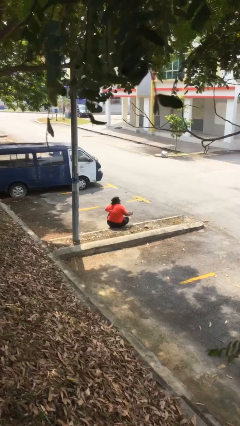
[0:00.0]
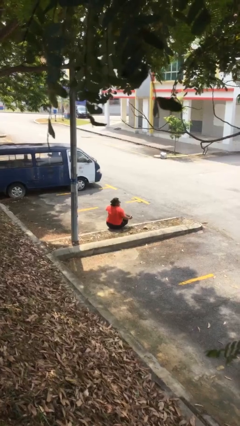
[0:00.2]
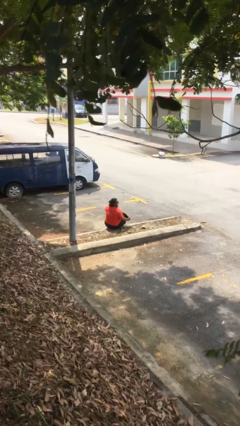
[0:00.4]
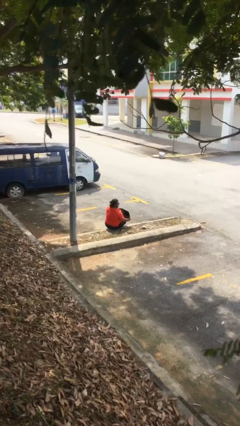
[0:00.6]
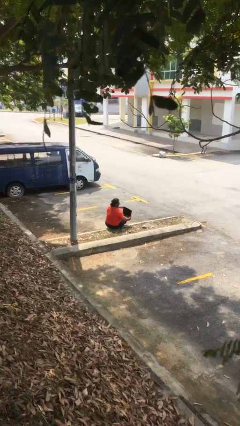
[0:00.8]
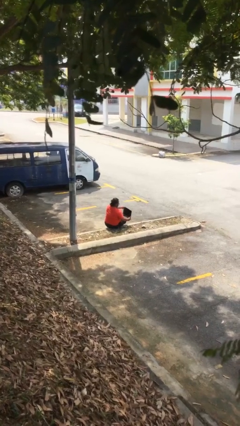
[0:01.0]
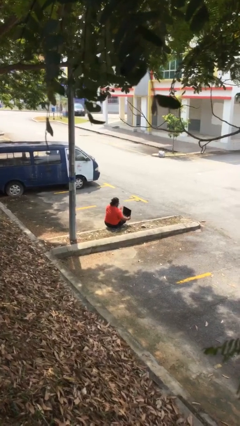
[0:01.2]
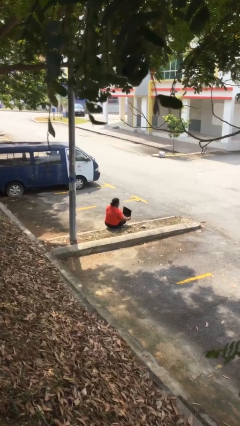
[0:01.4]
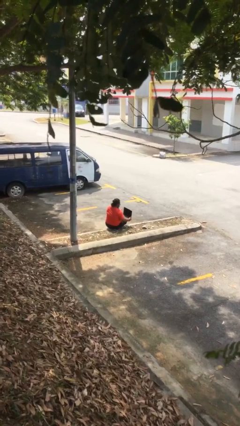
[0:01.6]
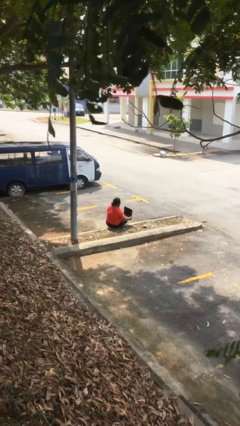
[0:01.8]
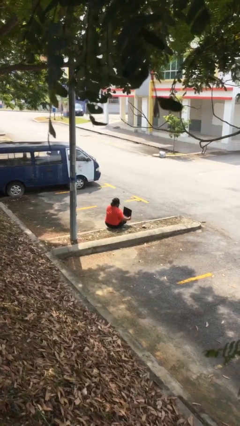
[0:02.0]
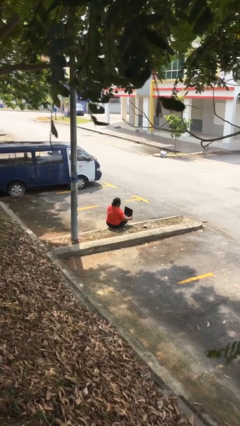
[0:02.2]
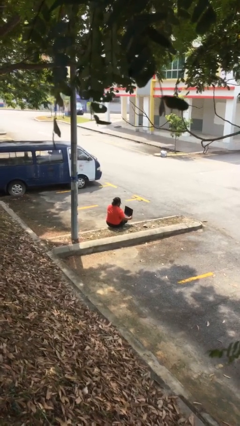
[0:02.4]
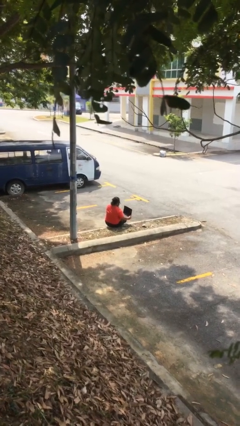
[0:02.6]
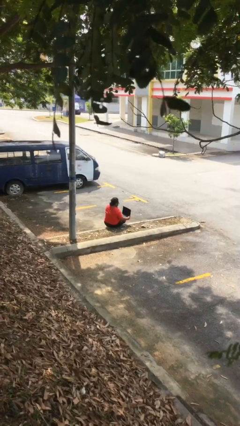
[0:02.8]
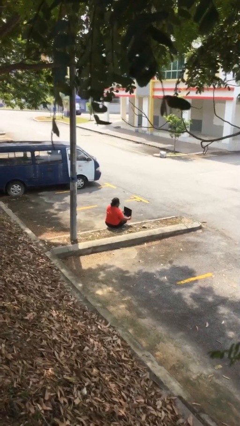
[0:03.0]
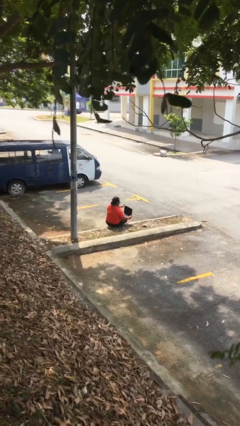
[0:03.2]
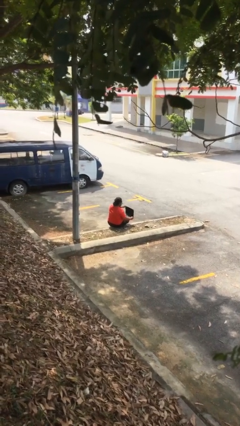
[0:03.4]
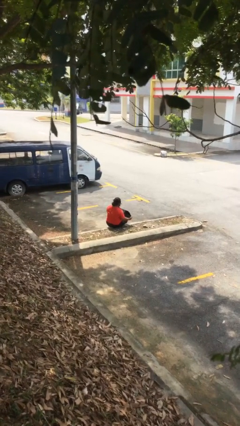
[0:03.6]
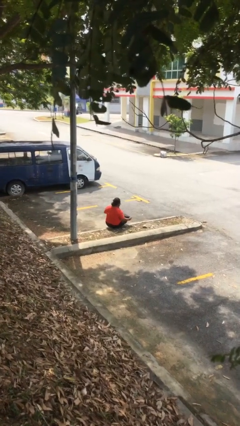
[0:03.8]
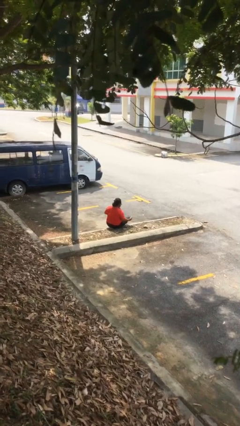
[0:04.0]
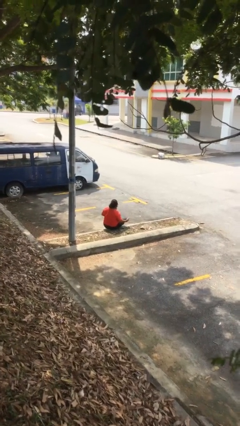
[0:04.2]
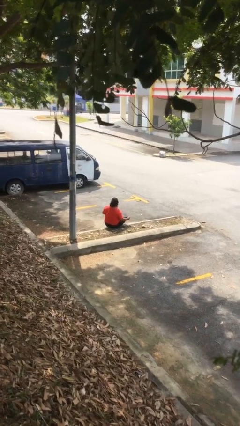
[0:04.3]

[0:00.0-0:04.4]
person interacts with laptop

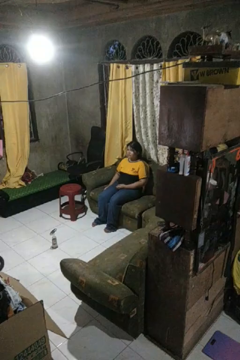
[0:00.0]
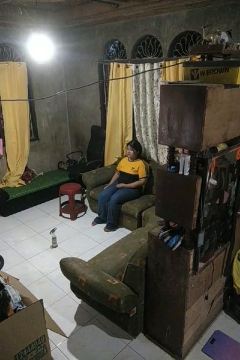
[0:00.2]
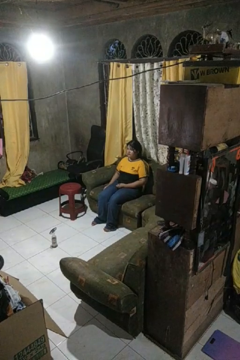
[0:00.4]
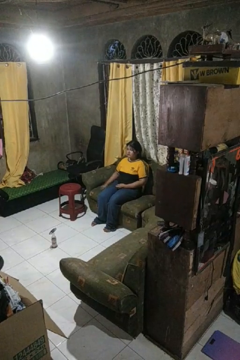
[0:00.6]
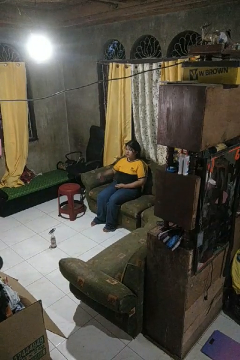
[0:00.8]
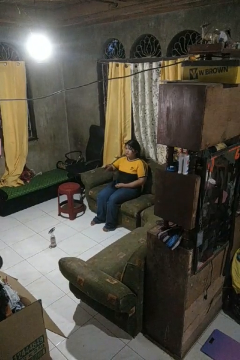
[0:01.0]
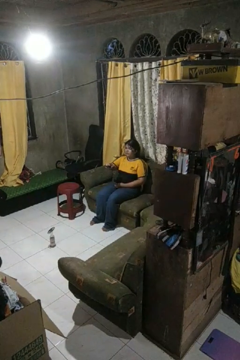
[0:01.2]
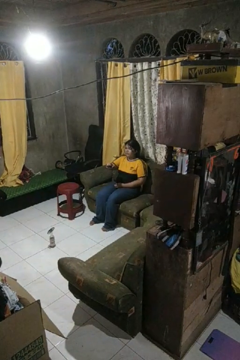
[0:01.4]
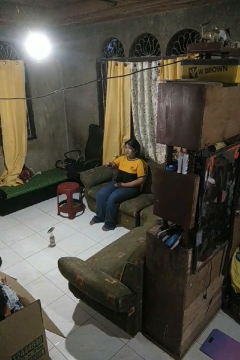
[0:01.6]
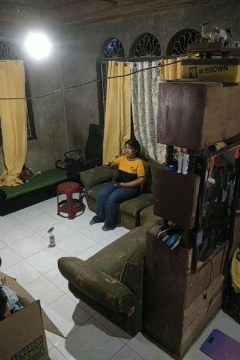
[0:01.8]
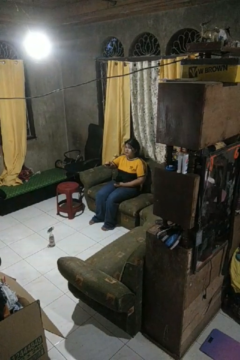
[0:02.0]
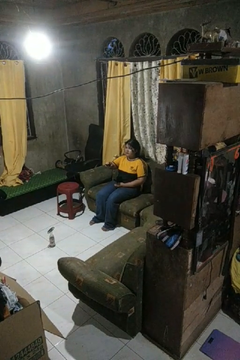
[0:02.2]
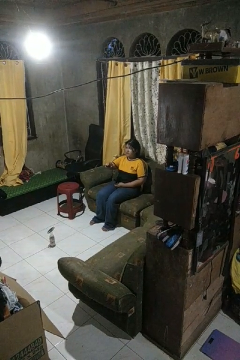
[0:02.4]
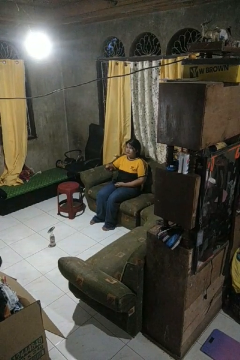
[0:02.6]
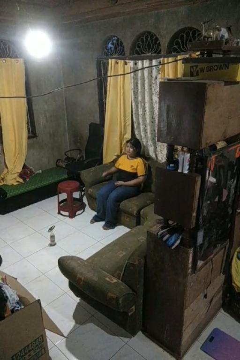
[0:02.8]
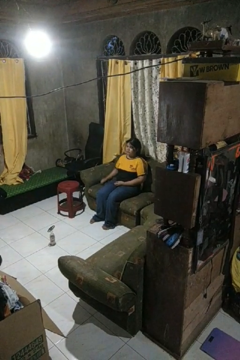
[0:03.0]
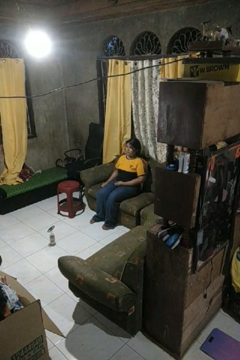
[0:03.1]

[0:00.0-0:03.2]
person uses television remote

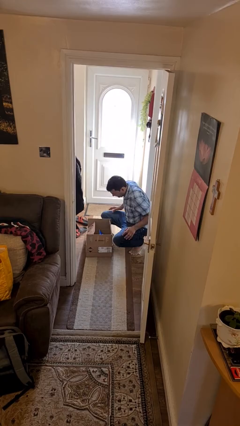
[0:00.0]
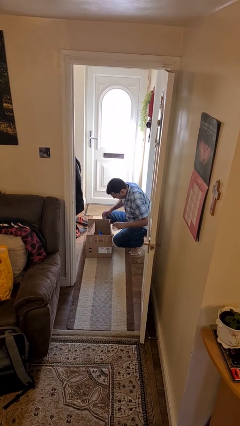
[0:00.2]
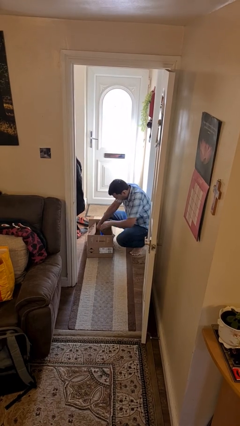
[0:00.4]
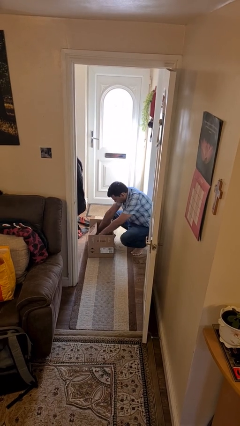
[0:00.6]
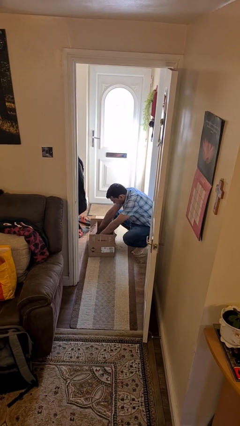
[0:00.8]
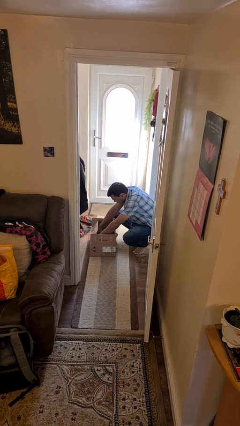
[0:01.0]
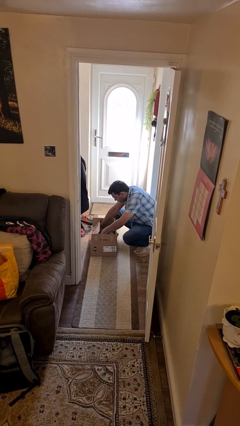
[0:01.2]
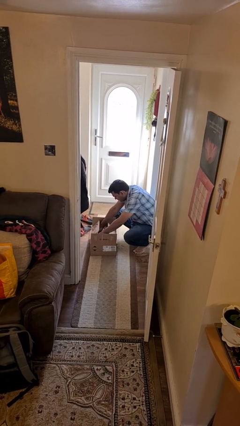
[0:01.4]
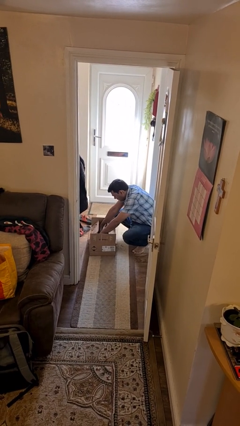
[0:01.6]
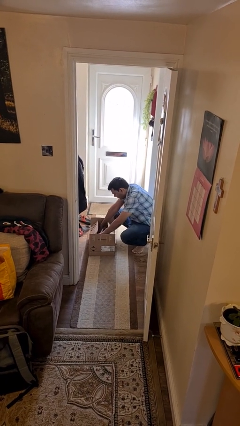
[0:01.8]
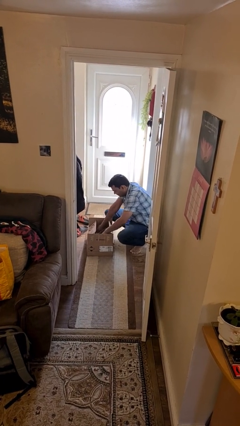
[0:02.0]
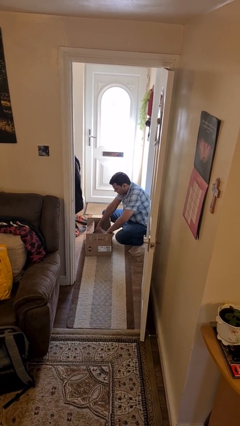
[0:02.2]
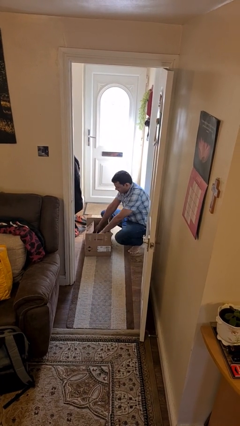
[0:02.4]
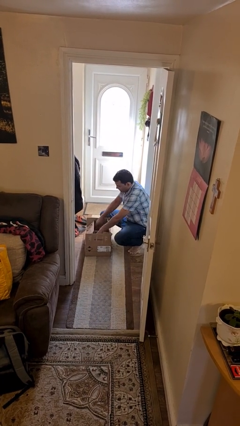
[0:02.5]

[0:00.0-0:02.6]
person searches in box

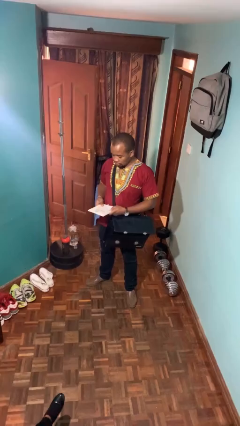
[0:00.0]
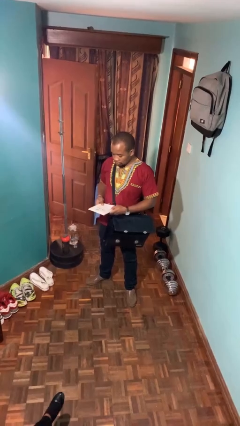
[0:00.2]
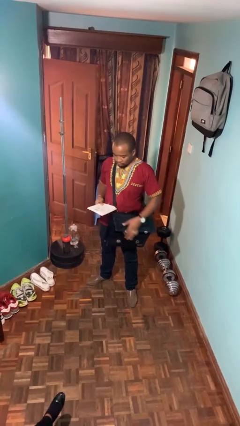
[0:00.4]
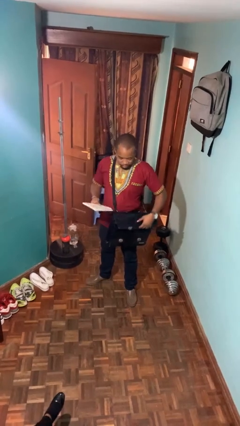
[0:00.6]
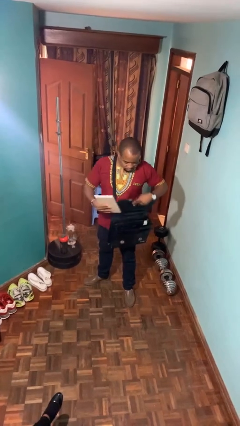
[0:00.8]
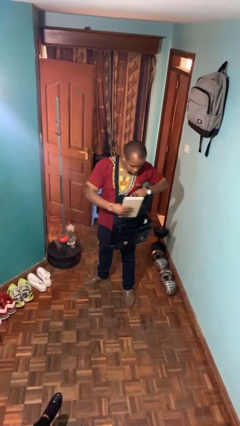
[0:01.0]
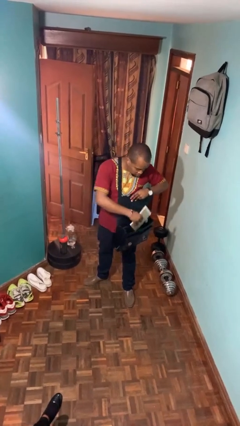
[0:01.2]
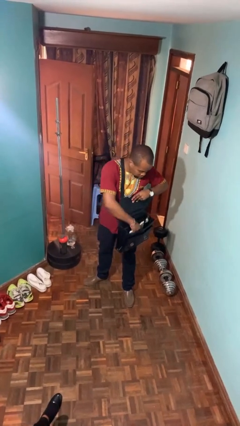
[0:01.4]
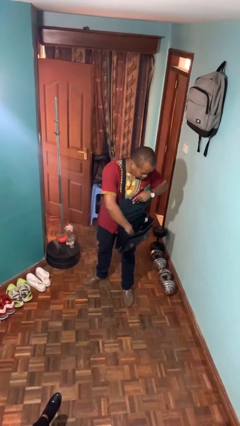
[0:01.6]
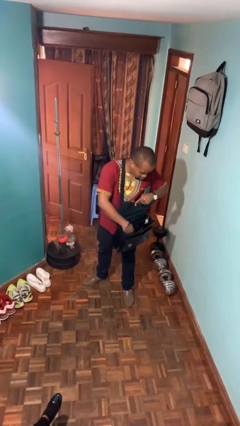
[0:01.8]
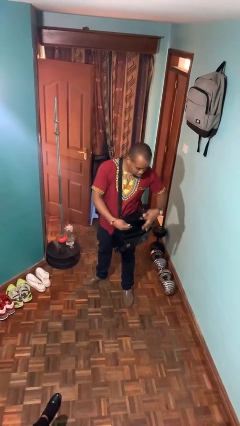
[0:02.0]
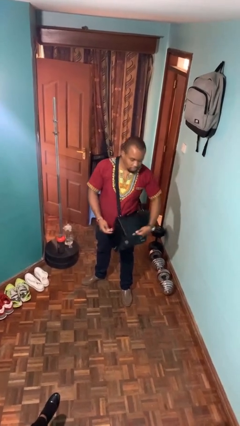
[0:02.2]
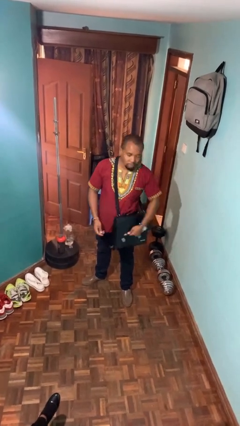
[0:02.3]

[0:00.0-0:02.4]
person puts object into purse

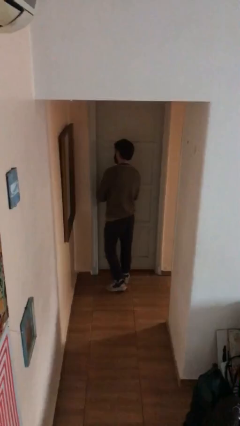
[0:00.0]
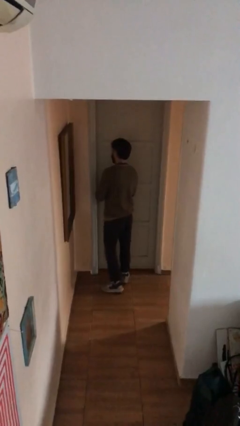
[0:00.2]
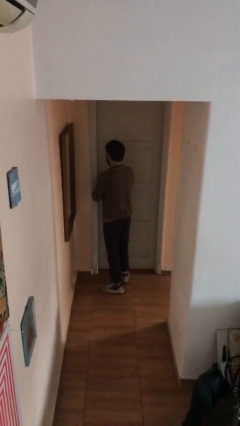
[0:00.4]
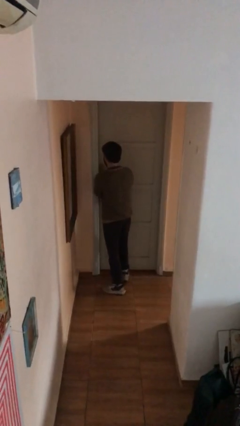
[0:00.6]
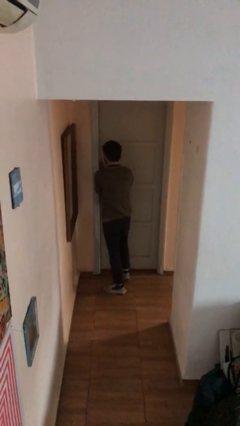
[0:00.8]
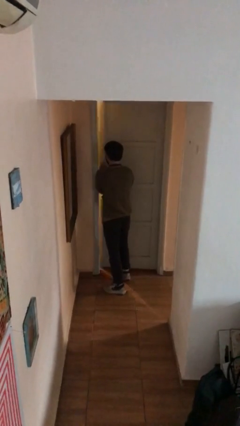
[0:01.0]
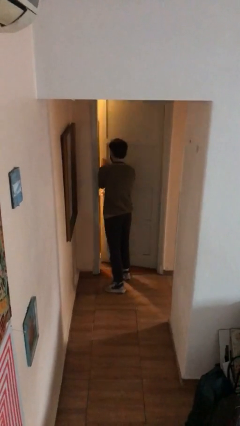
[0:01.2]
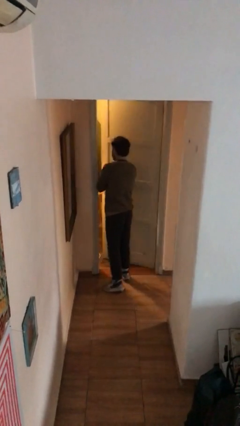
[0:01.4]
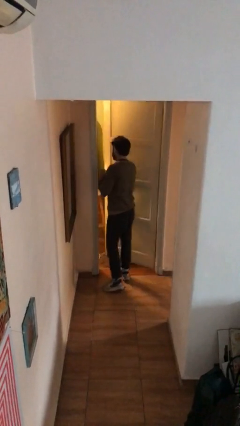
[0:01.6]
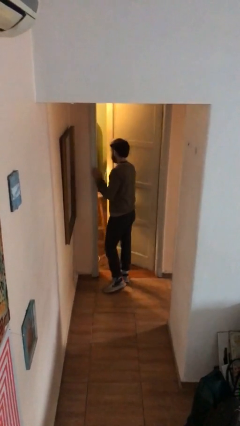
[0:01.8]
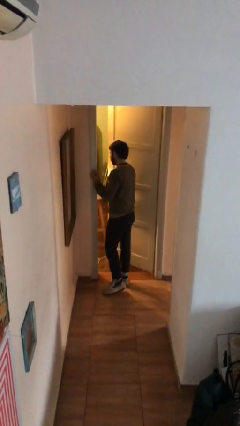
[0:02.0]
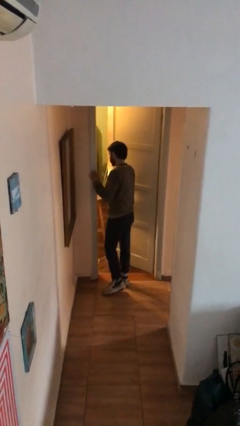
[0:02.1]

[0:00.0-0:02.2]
person opens facility door

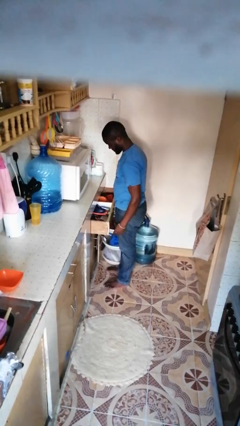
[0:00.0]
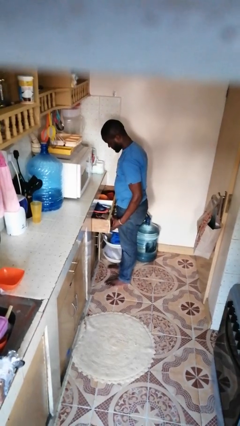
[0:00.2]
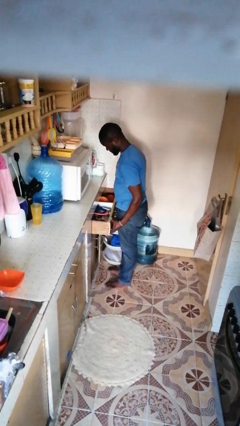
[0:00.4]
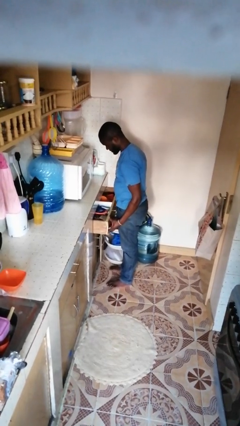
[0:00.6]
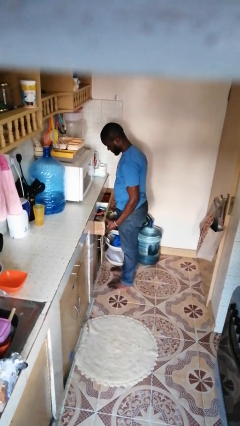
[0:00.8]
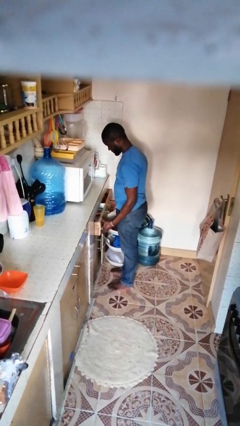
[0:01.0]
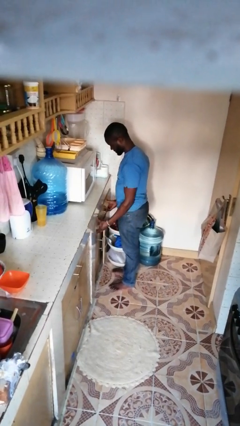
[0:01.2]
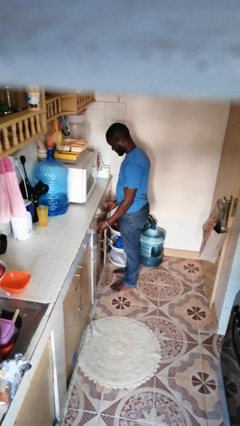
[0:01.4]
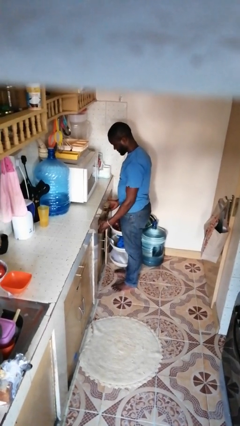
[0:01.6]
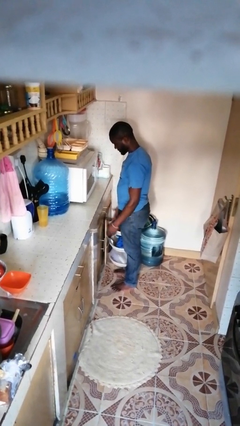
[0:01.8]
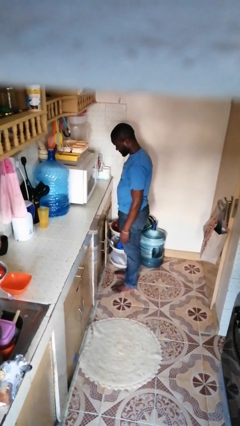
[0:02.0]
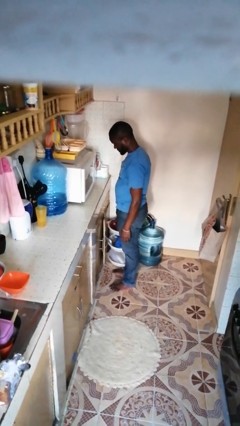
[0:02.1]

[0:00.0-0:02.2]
person closes kitchen drawer

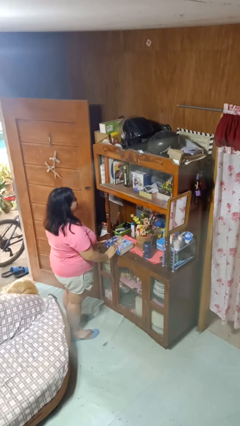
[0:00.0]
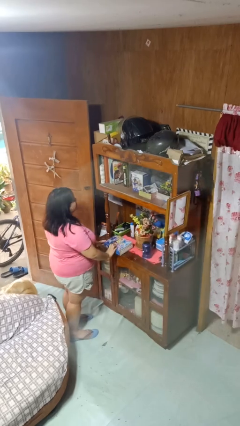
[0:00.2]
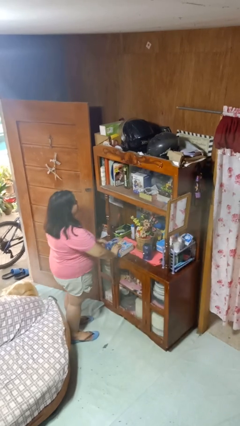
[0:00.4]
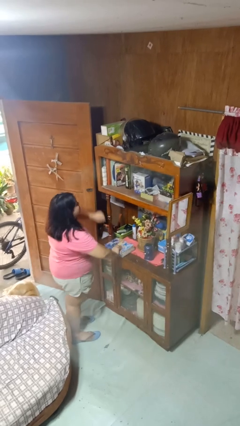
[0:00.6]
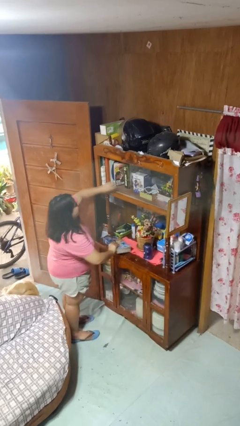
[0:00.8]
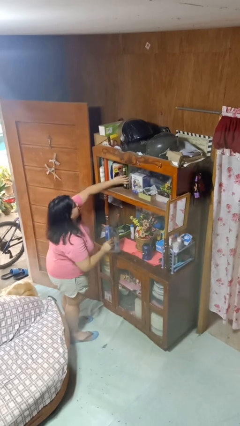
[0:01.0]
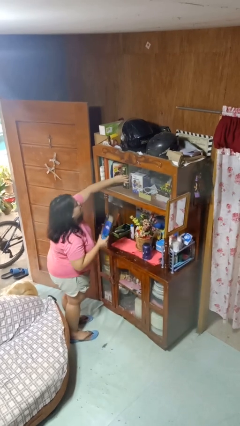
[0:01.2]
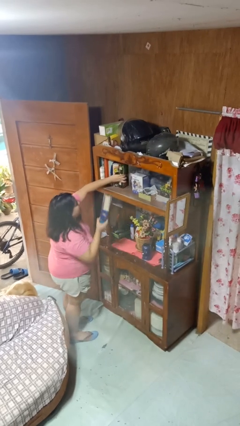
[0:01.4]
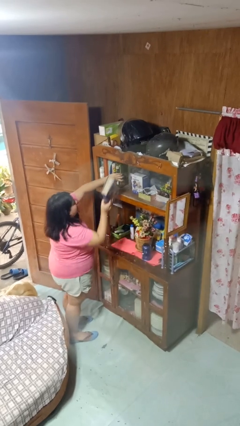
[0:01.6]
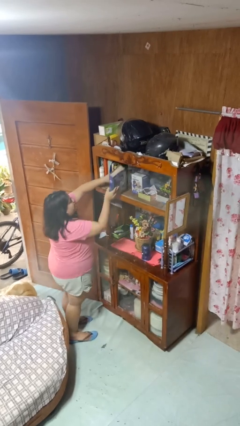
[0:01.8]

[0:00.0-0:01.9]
person puts down object on shelf
